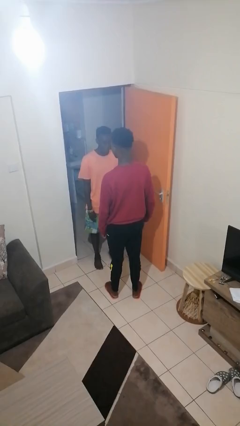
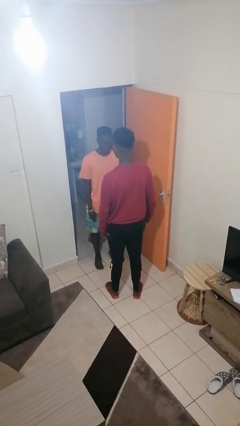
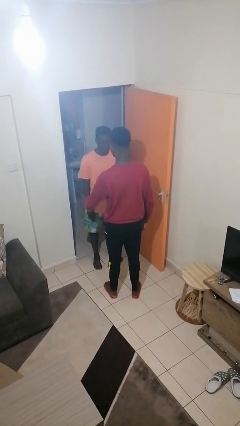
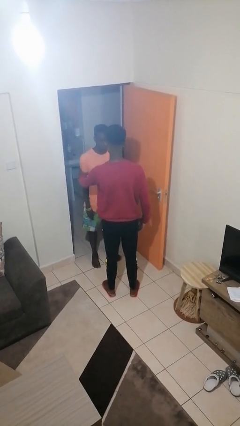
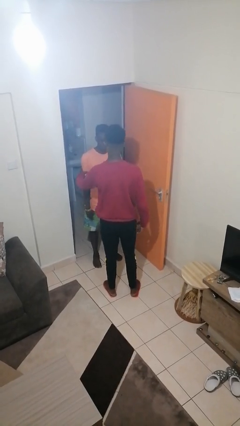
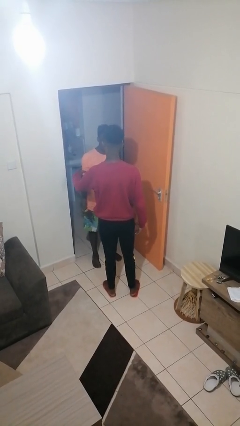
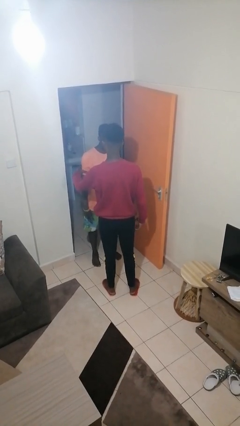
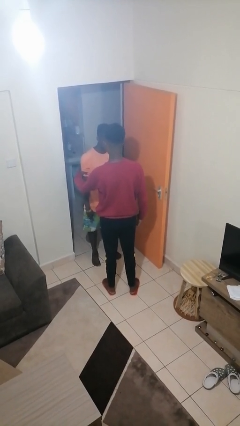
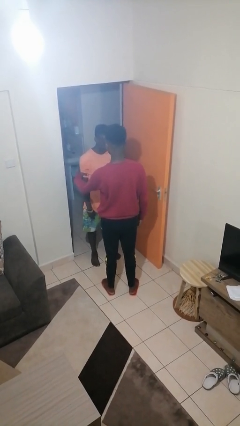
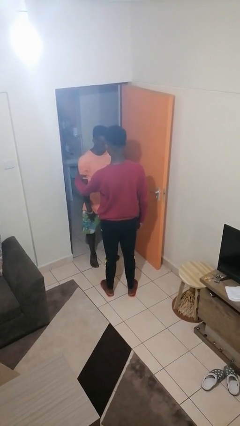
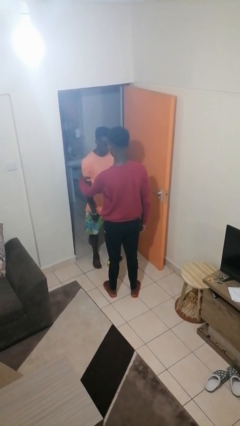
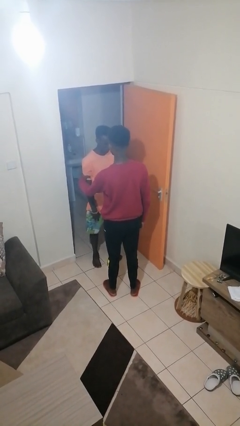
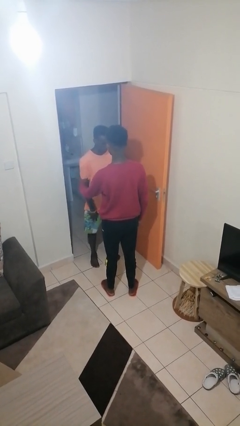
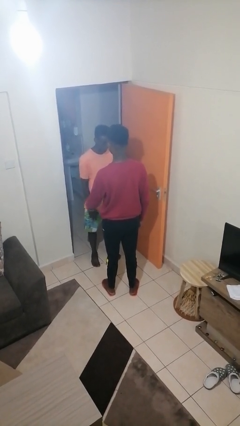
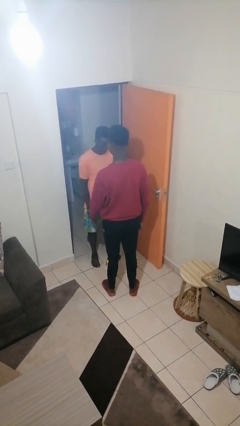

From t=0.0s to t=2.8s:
person grabs person by bicep

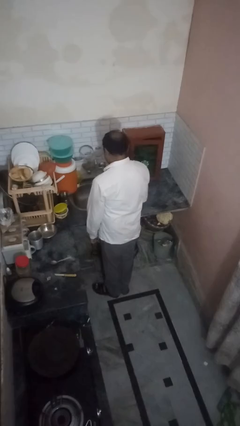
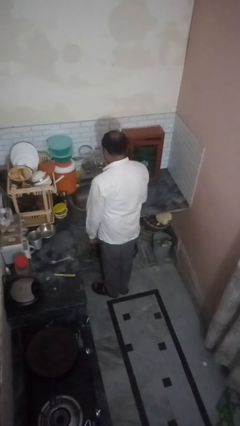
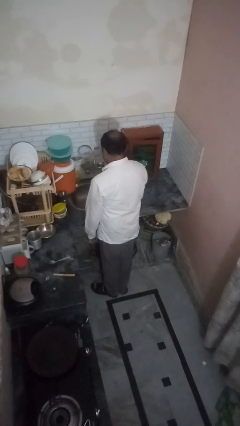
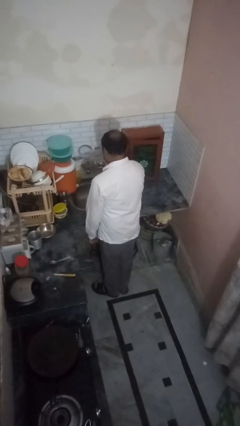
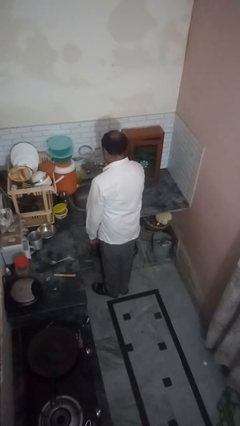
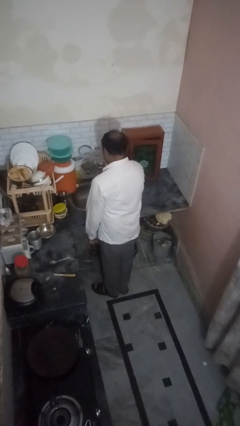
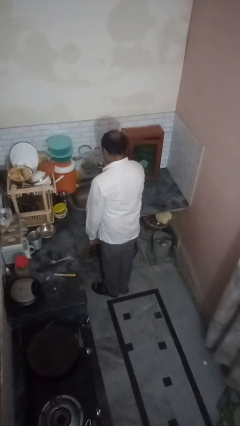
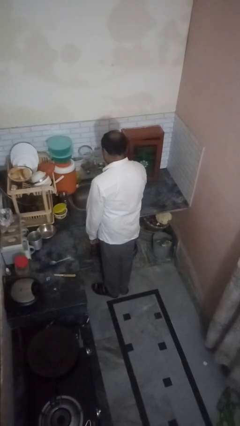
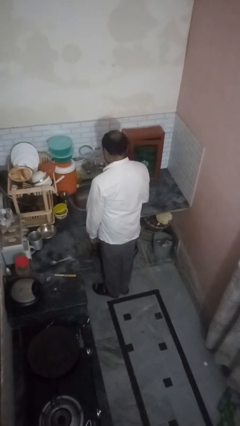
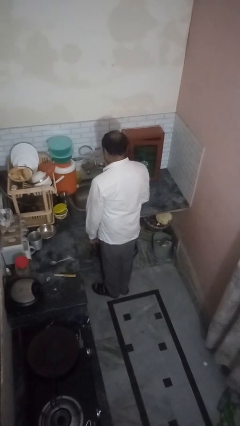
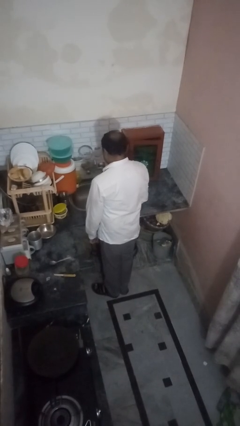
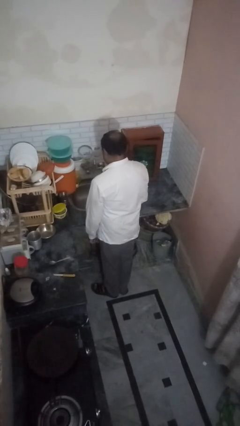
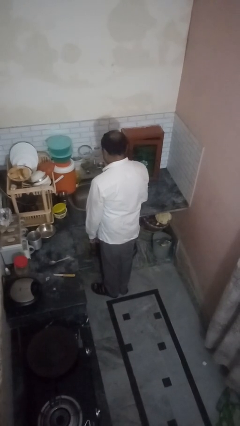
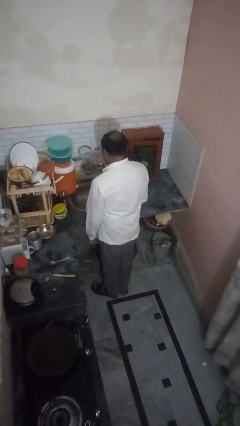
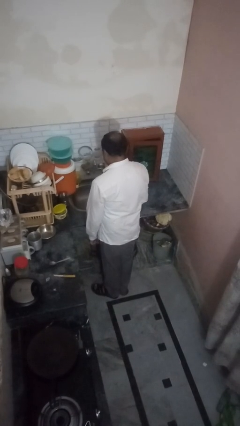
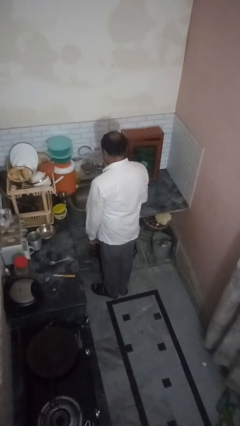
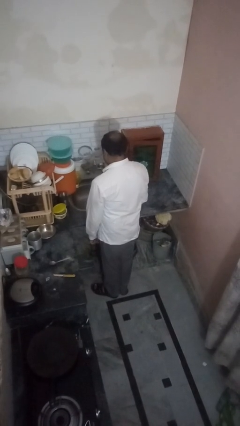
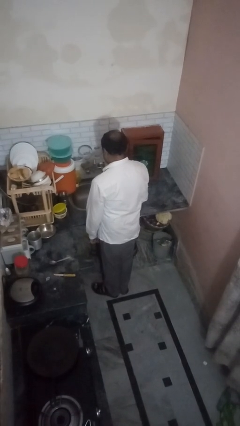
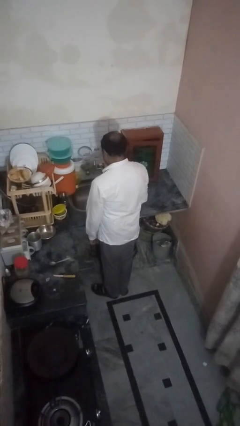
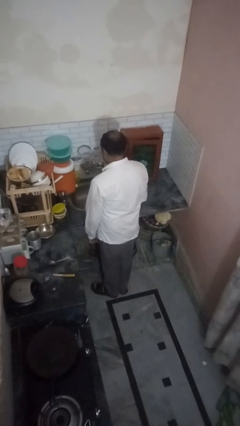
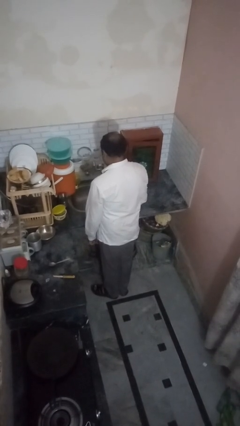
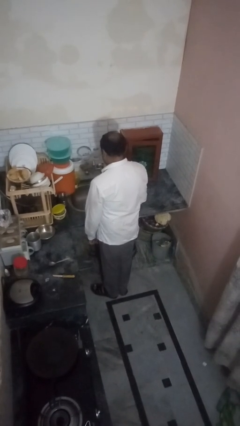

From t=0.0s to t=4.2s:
person turns off faucet

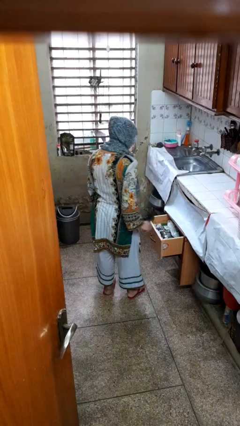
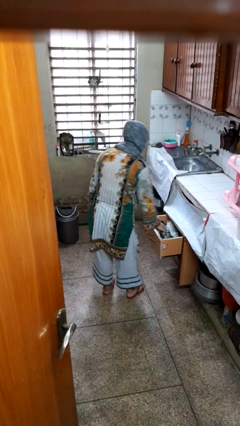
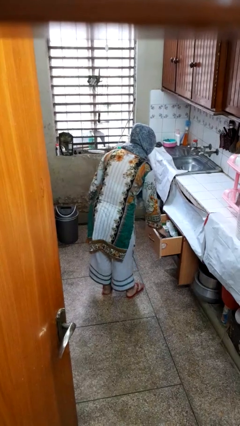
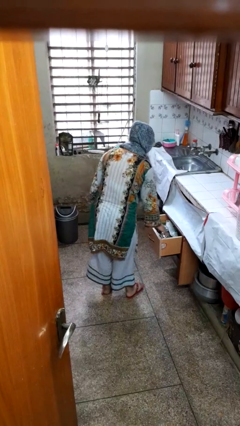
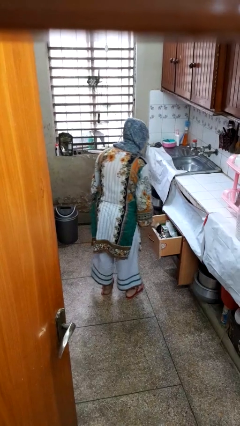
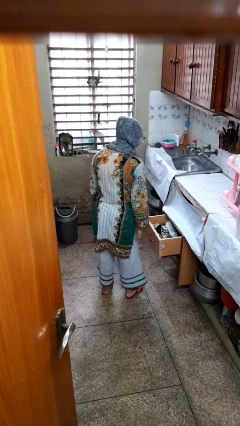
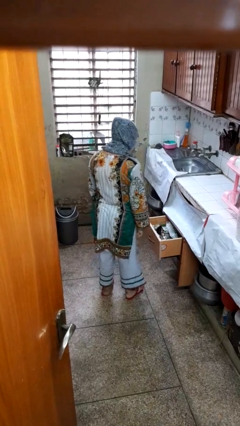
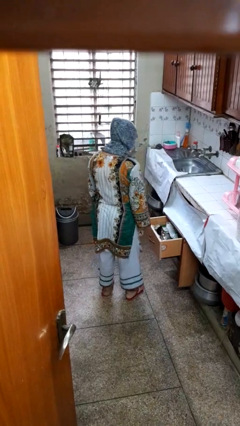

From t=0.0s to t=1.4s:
person puts object into kitchen drawer

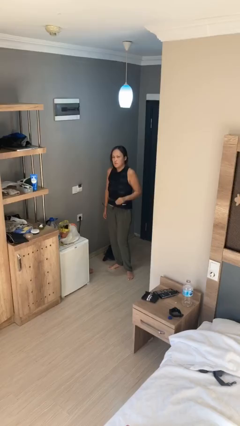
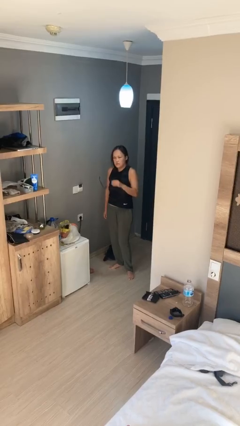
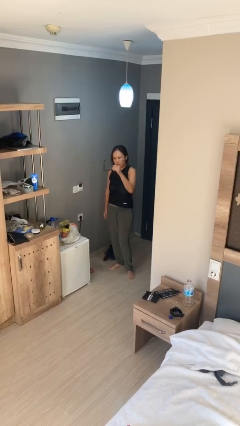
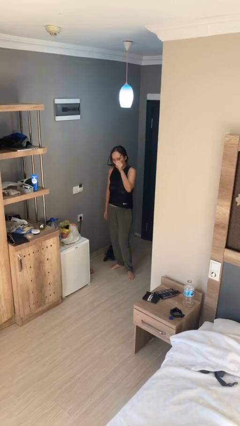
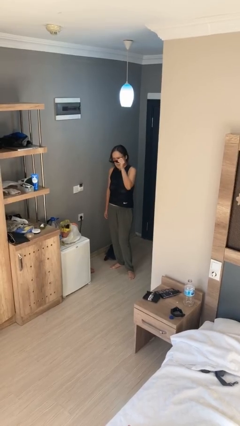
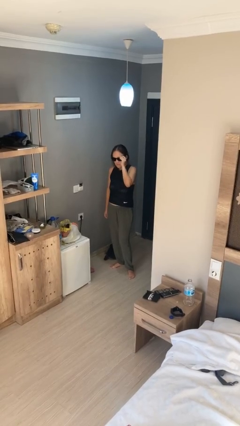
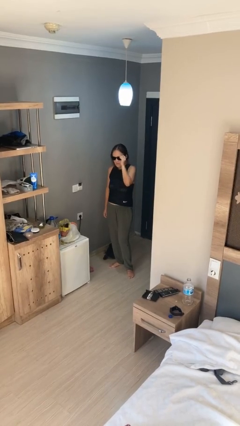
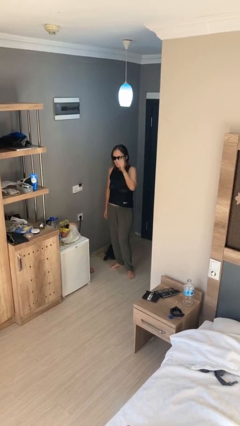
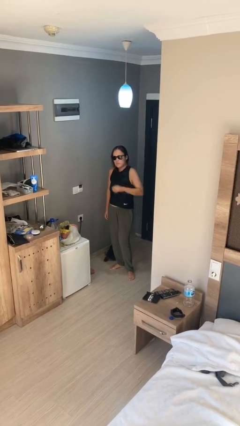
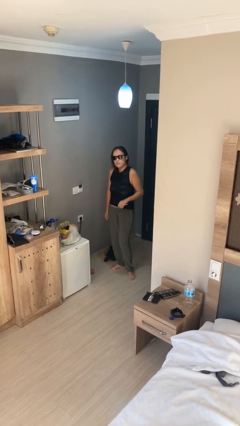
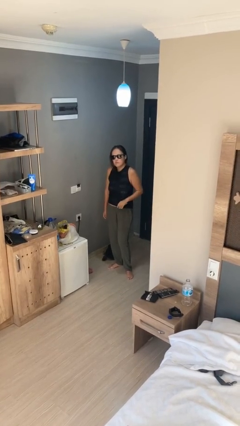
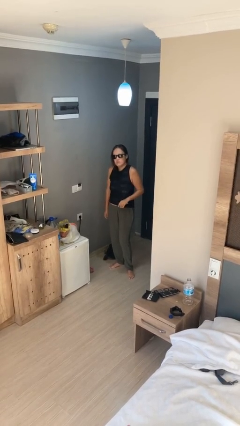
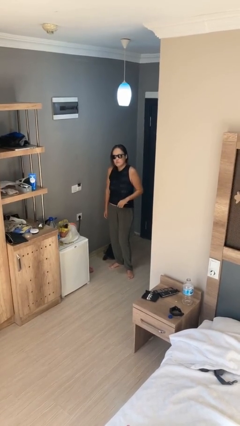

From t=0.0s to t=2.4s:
person puts on sunglasses

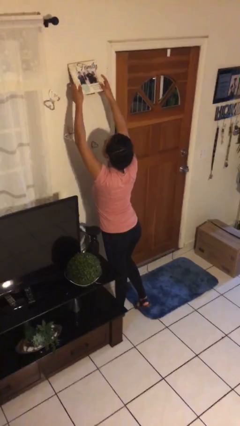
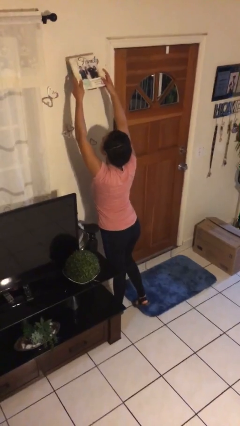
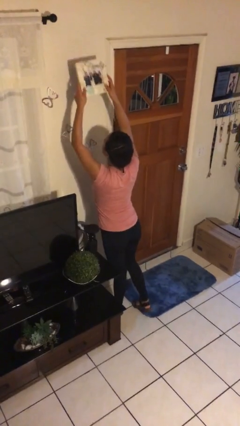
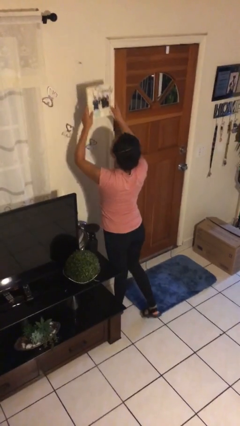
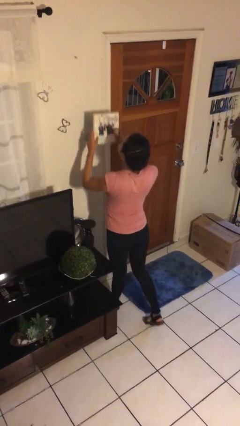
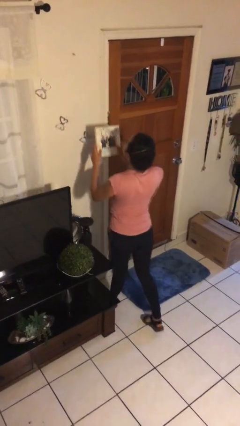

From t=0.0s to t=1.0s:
person takes down picture frame

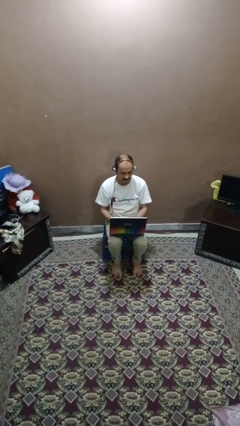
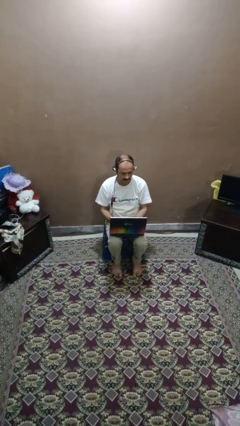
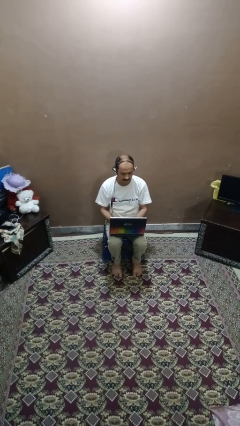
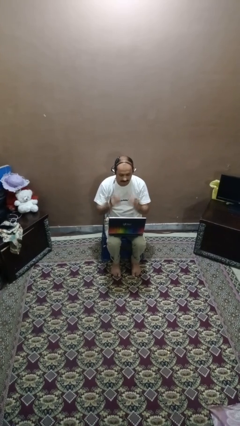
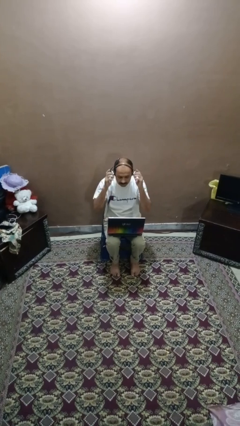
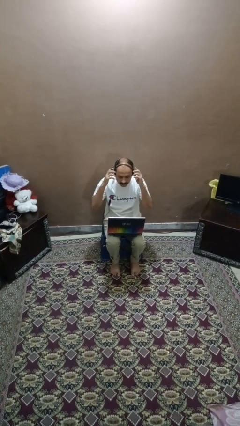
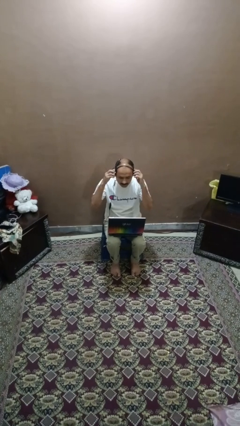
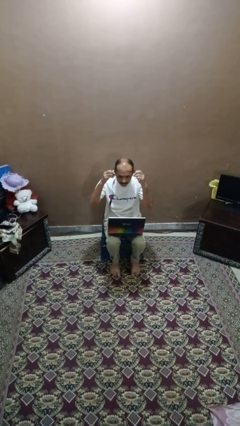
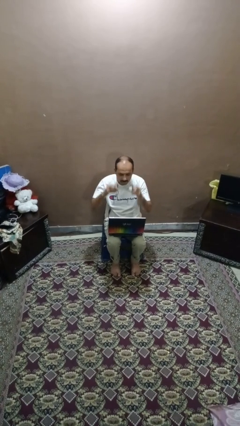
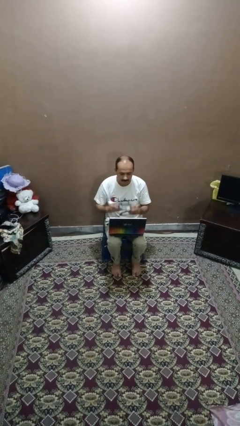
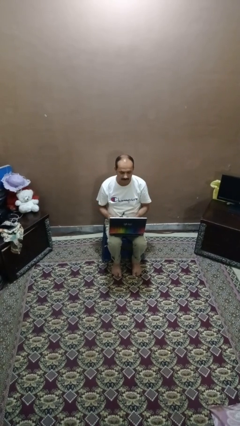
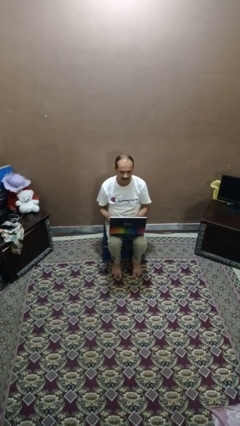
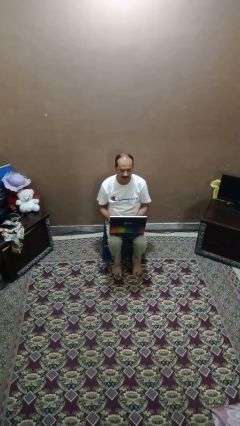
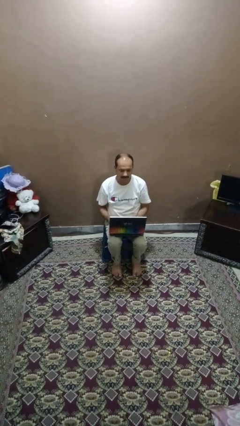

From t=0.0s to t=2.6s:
person takes off headphones

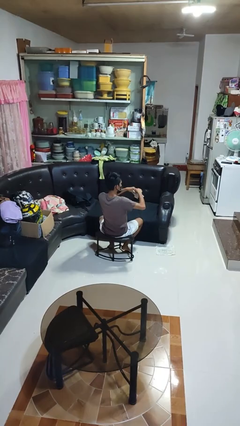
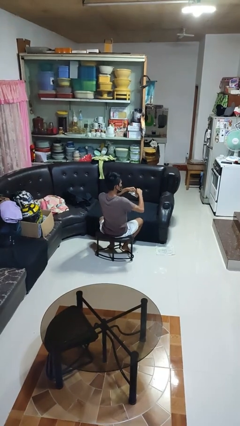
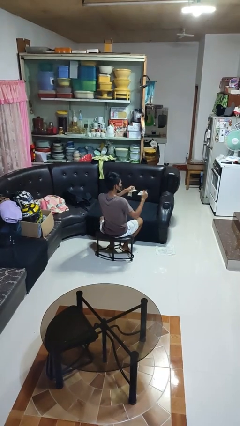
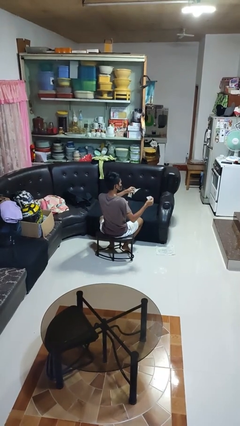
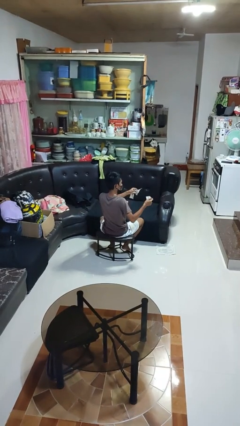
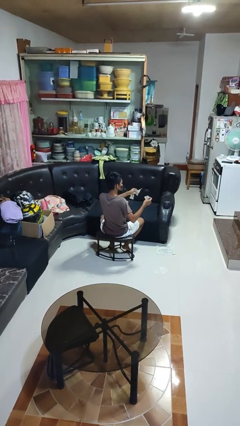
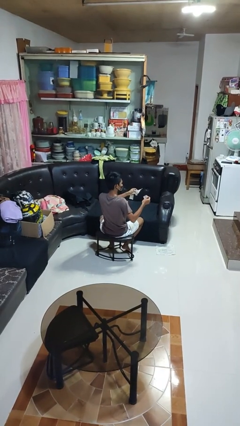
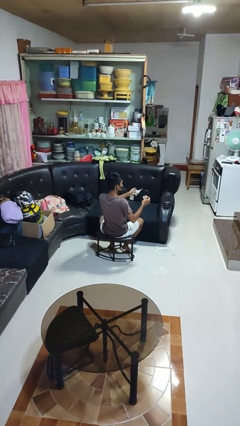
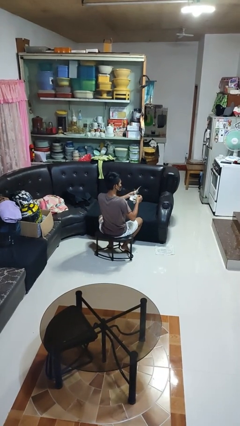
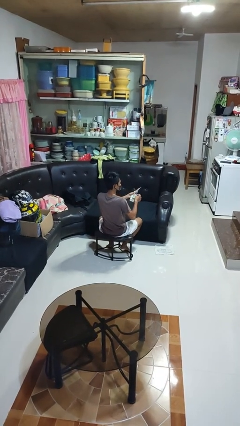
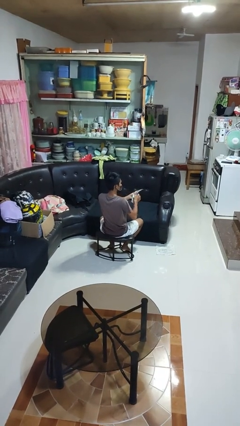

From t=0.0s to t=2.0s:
person tears paper

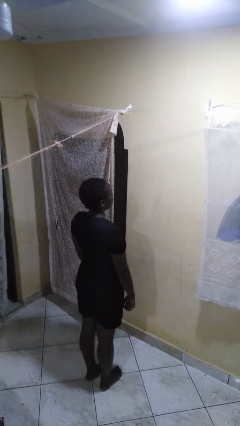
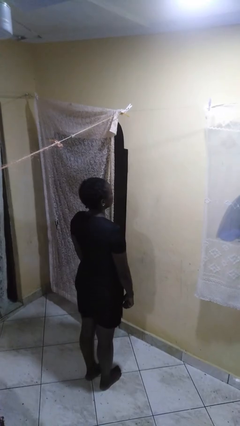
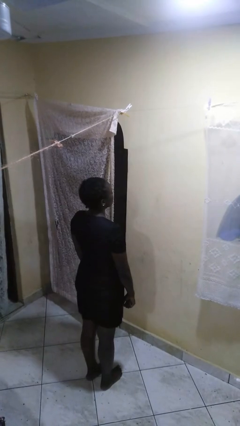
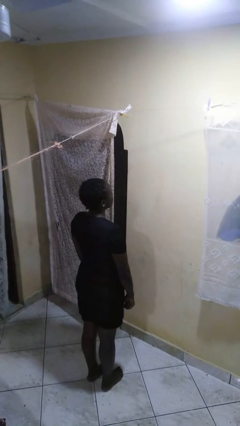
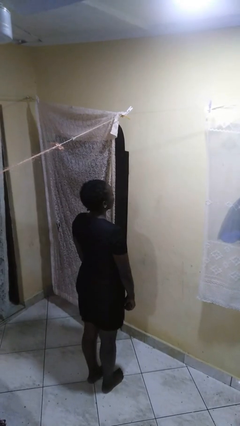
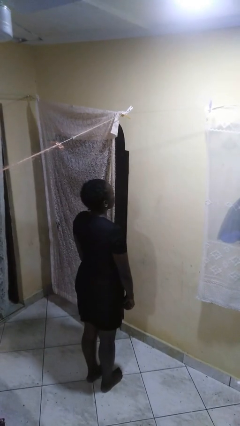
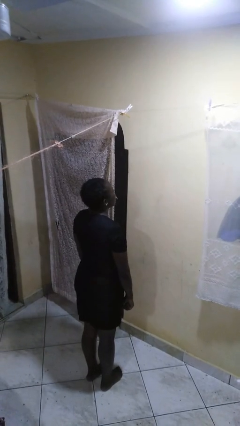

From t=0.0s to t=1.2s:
person sticks out tongue
